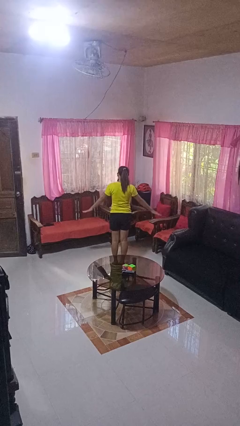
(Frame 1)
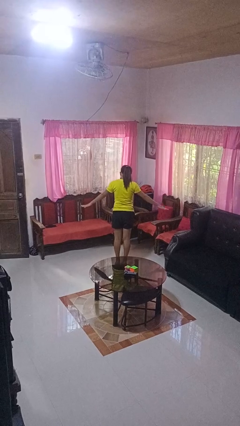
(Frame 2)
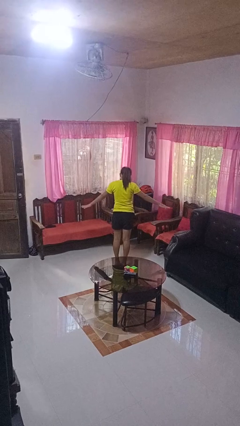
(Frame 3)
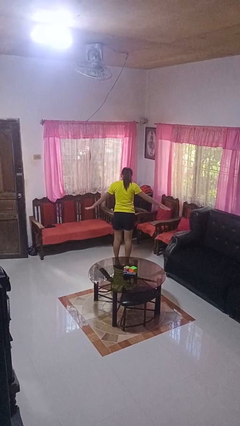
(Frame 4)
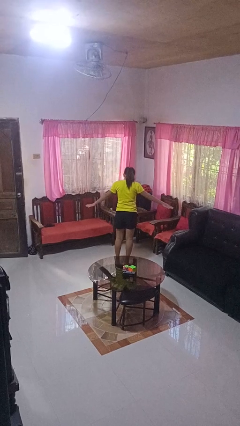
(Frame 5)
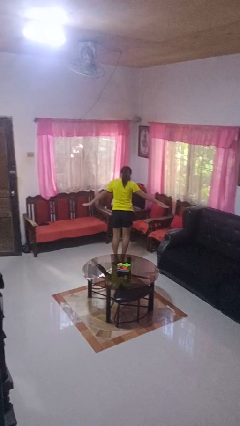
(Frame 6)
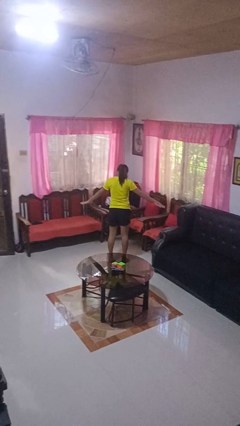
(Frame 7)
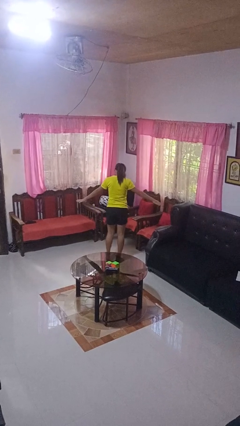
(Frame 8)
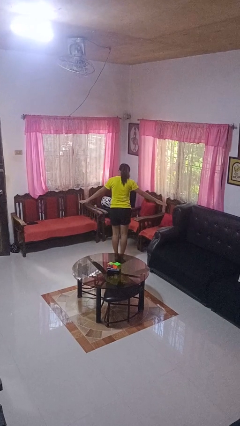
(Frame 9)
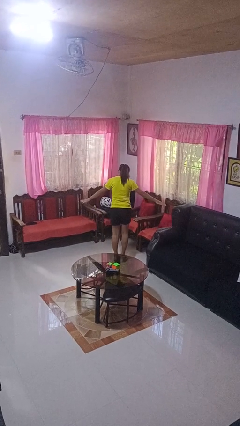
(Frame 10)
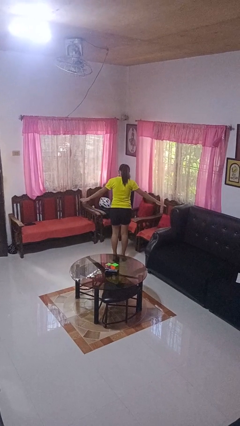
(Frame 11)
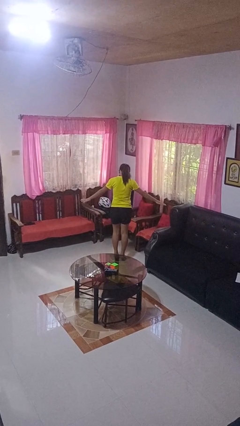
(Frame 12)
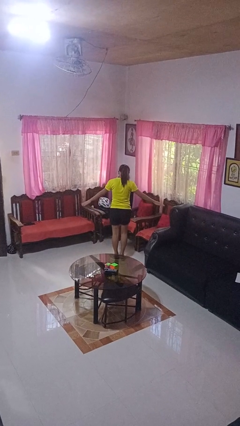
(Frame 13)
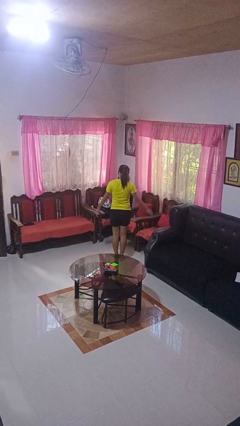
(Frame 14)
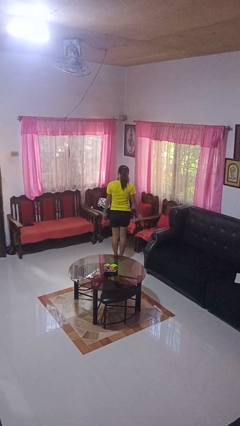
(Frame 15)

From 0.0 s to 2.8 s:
person walks tiptoe

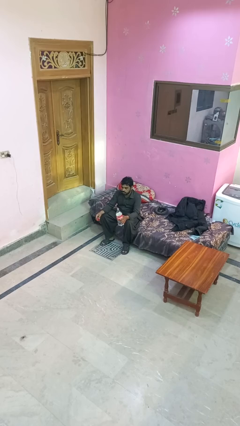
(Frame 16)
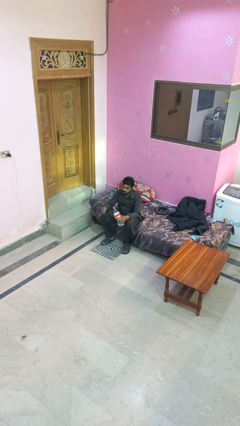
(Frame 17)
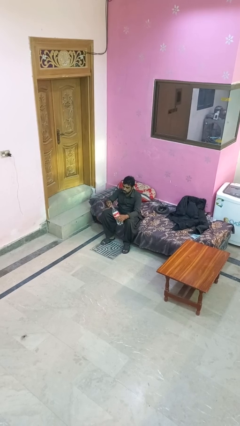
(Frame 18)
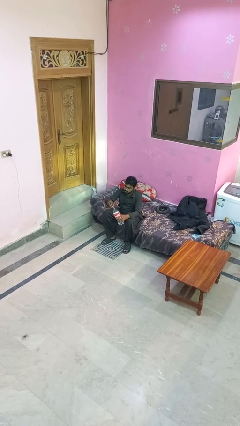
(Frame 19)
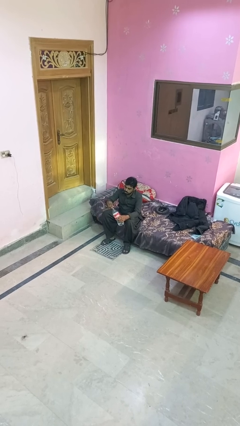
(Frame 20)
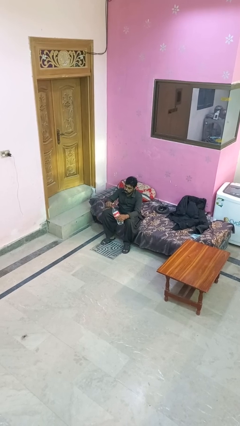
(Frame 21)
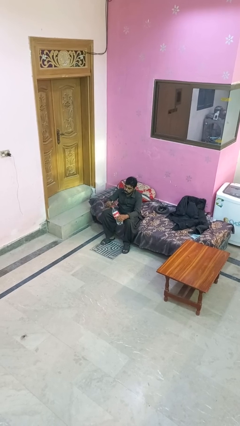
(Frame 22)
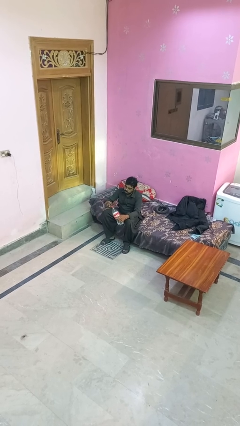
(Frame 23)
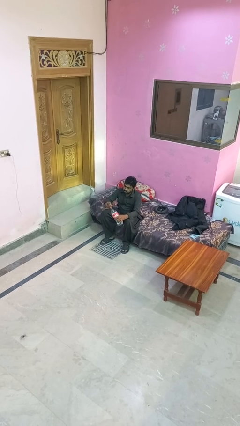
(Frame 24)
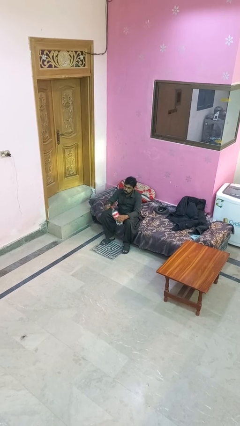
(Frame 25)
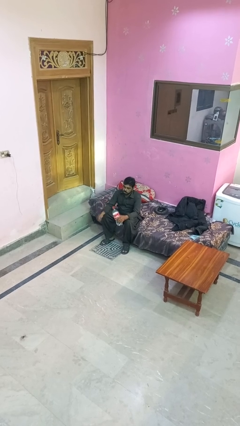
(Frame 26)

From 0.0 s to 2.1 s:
person screws lid to bottle

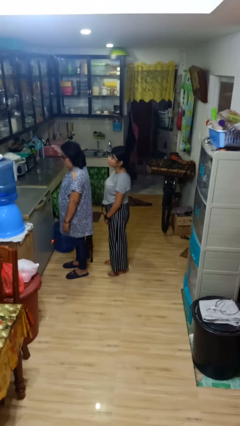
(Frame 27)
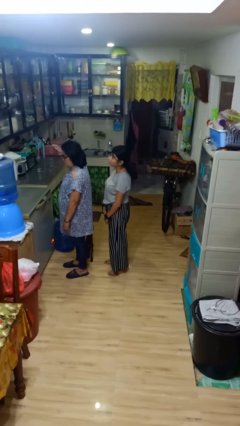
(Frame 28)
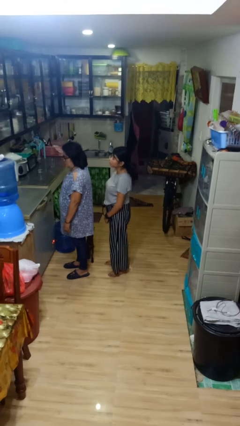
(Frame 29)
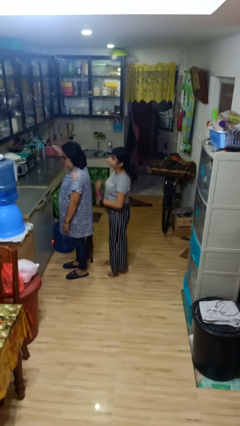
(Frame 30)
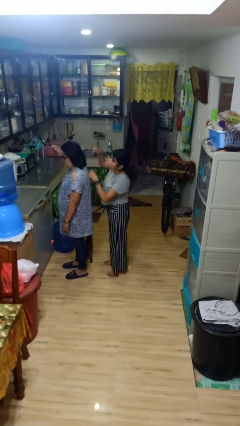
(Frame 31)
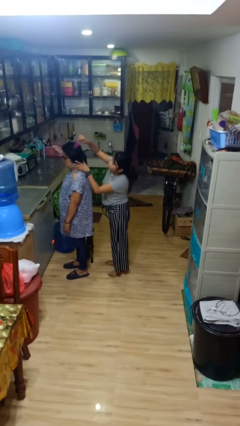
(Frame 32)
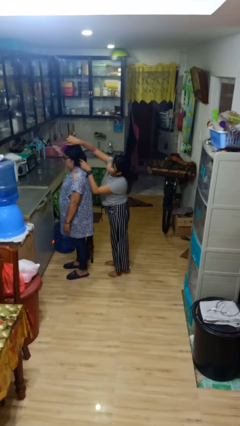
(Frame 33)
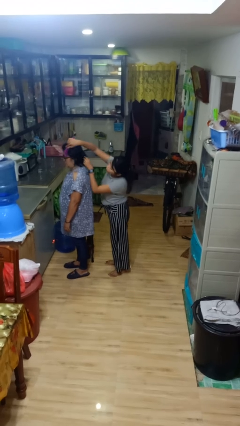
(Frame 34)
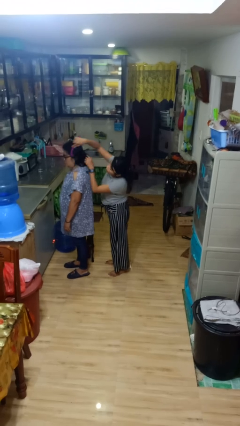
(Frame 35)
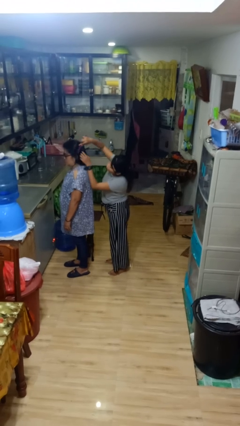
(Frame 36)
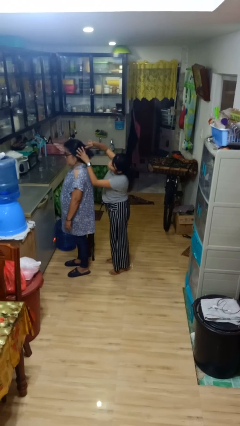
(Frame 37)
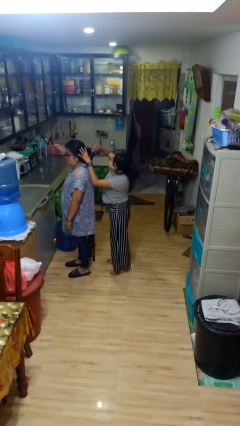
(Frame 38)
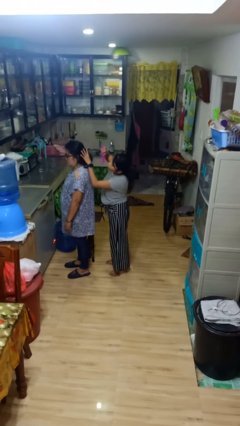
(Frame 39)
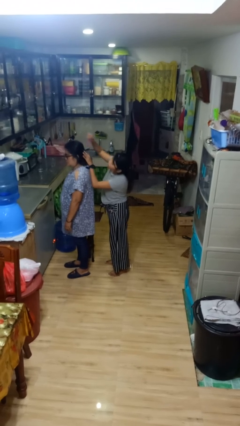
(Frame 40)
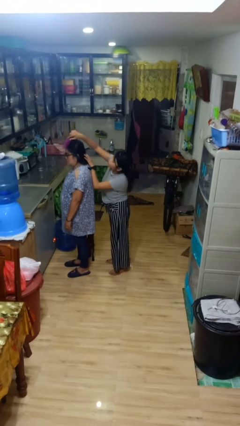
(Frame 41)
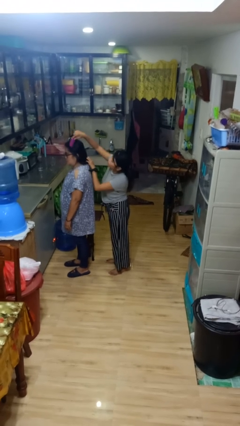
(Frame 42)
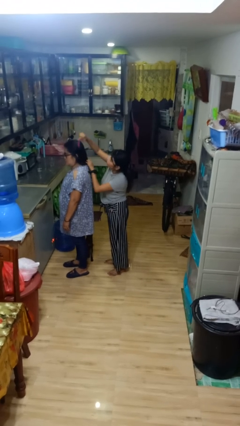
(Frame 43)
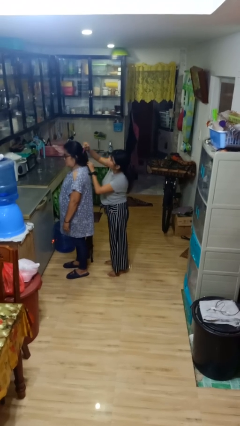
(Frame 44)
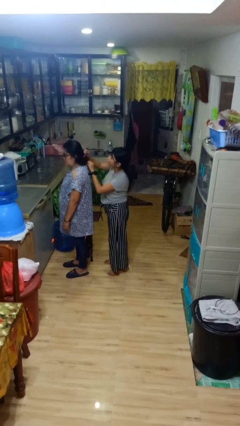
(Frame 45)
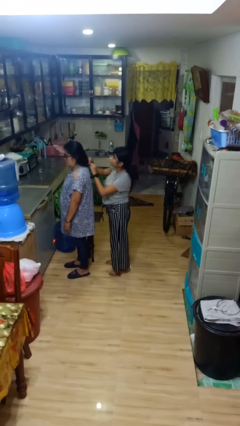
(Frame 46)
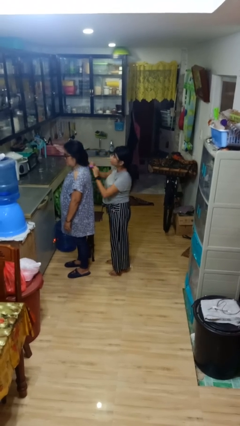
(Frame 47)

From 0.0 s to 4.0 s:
person brushes hair of person

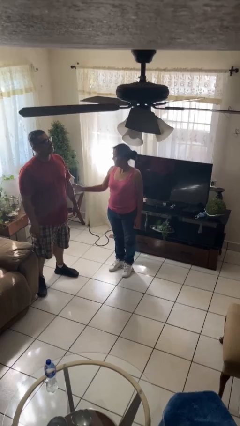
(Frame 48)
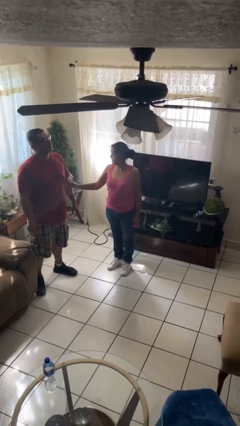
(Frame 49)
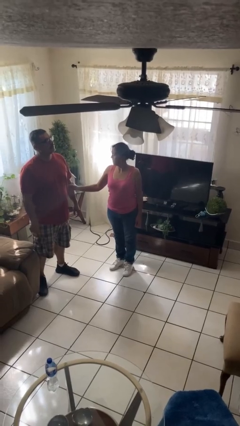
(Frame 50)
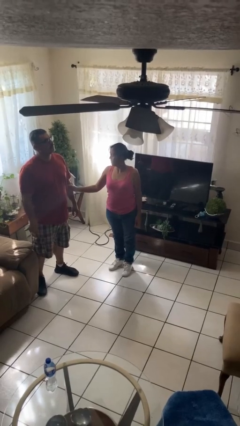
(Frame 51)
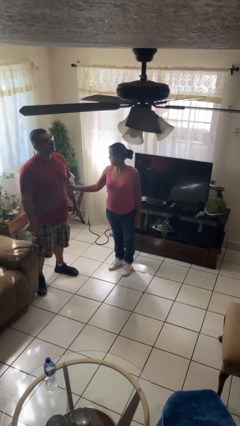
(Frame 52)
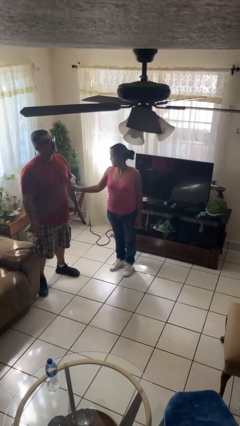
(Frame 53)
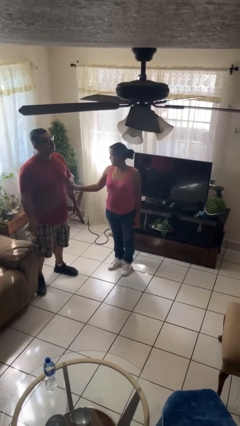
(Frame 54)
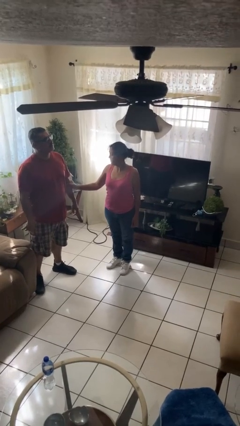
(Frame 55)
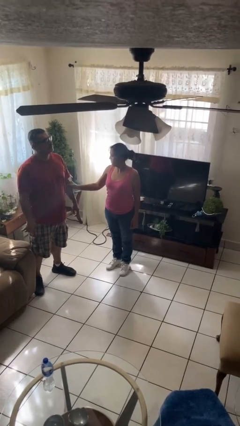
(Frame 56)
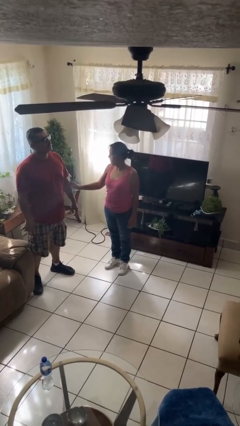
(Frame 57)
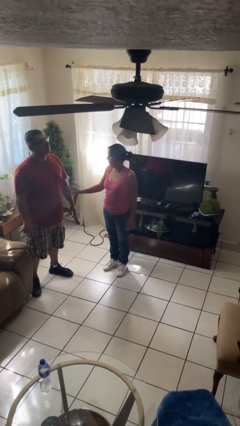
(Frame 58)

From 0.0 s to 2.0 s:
person grabs person by forearm

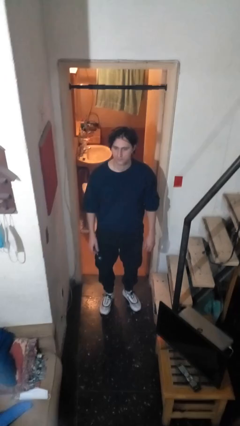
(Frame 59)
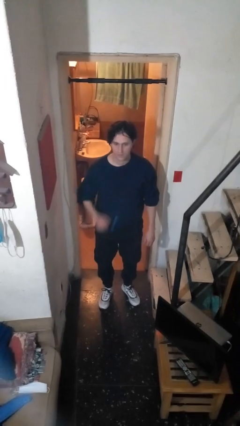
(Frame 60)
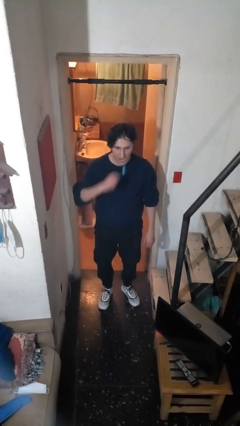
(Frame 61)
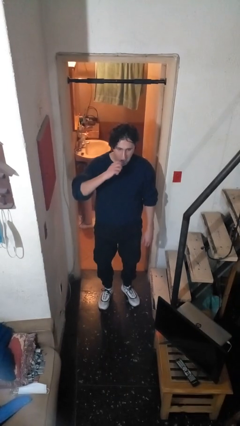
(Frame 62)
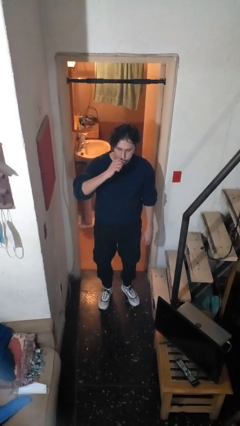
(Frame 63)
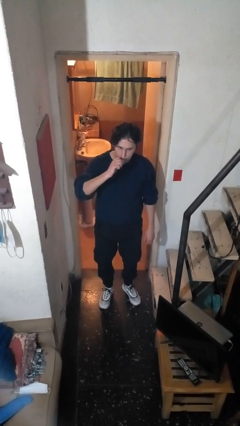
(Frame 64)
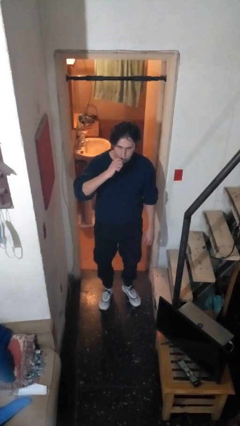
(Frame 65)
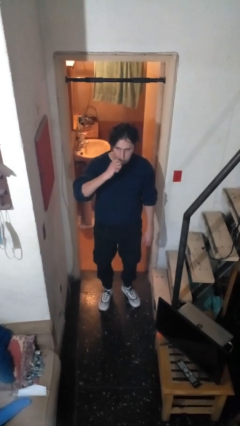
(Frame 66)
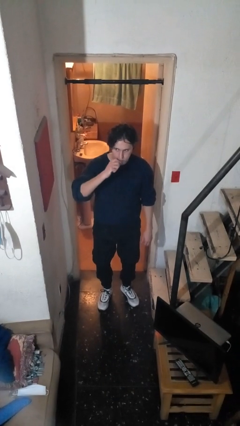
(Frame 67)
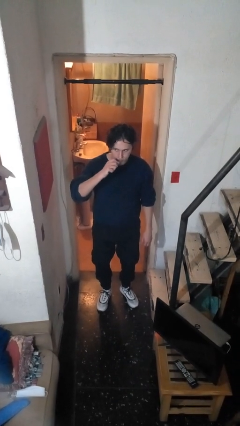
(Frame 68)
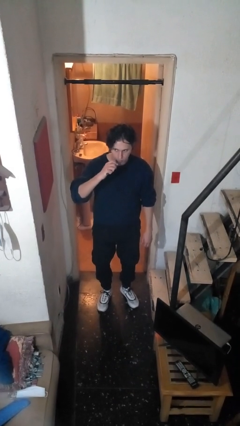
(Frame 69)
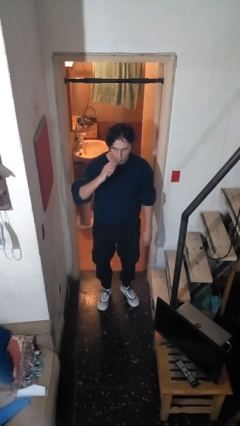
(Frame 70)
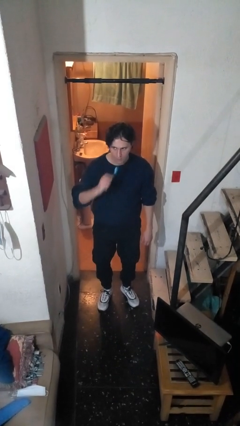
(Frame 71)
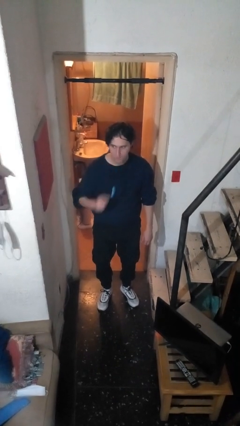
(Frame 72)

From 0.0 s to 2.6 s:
person brushes teeth

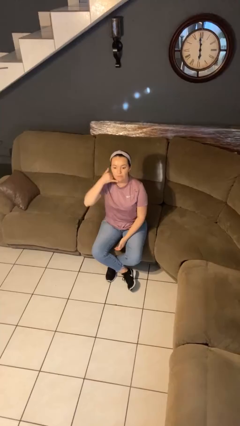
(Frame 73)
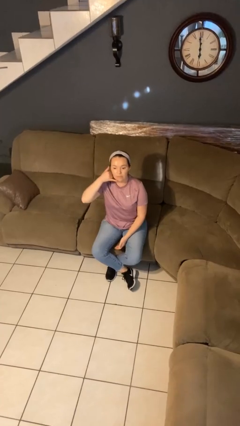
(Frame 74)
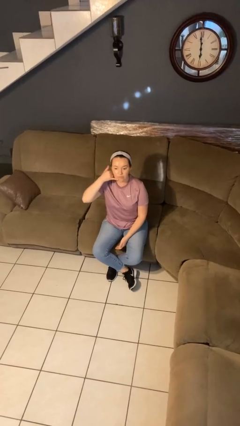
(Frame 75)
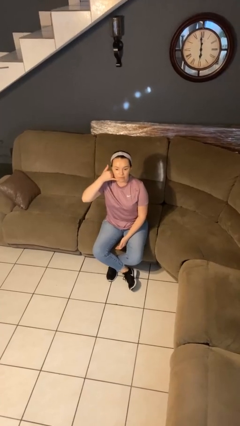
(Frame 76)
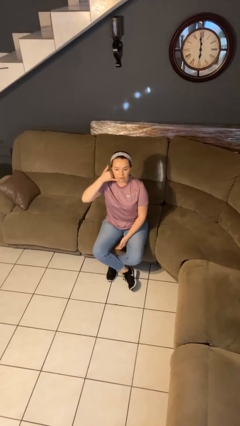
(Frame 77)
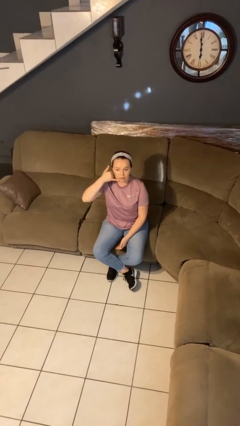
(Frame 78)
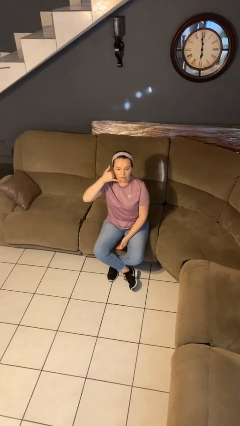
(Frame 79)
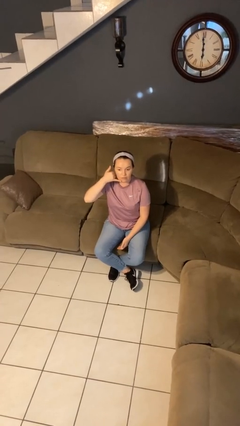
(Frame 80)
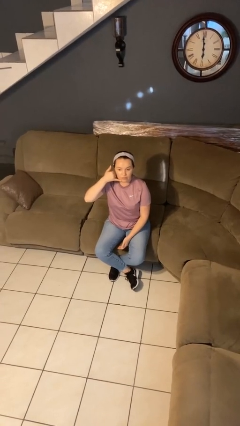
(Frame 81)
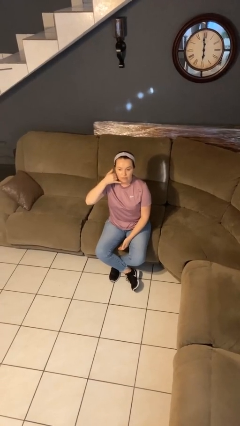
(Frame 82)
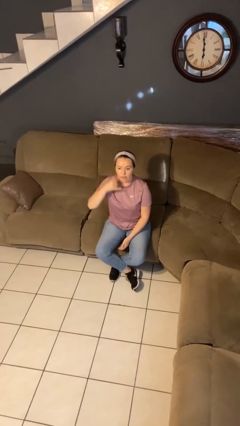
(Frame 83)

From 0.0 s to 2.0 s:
person gestures call me

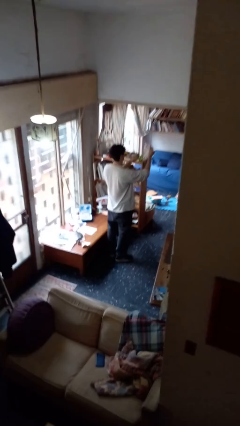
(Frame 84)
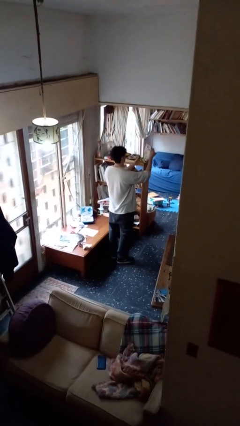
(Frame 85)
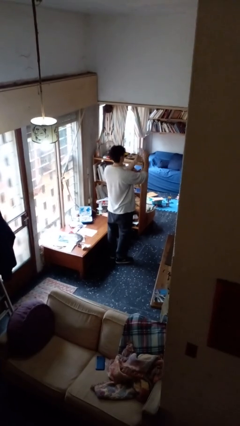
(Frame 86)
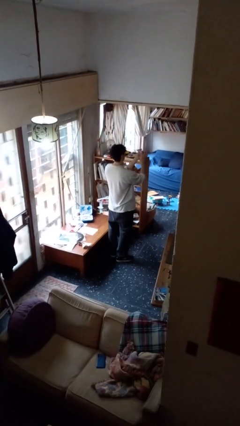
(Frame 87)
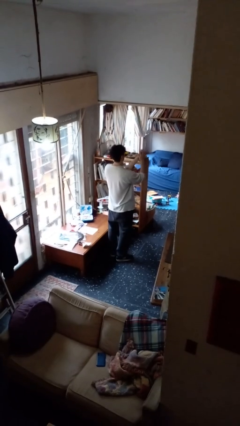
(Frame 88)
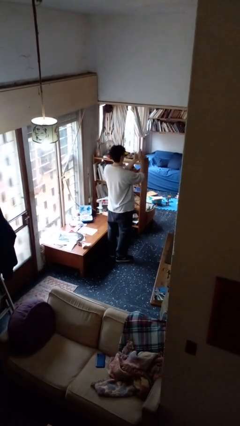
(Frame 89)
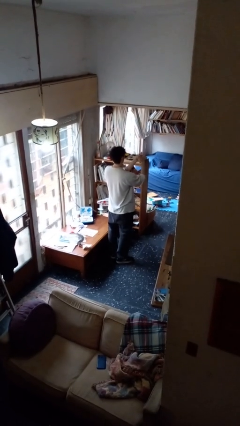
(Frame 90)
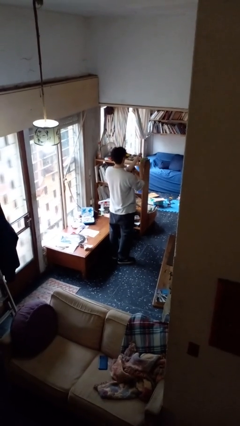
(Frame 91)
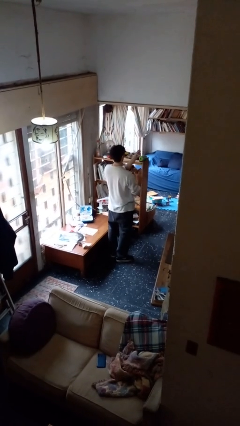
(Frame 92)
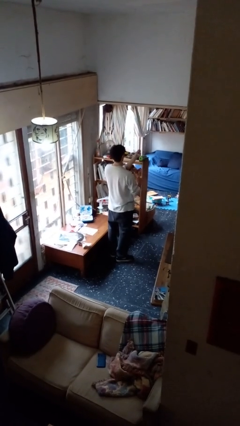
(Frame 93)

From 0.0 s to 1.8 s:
person crumples paper
